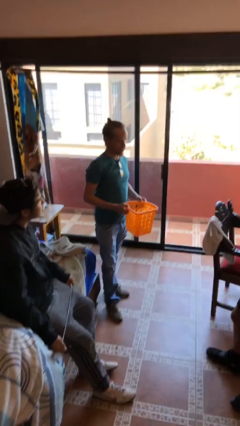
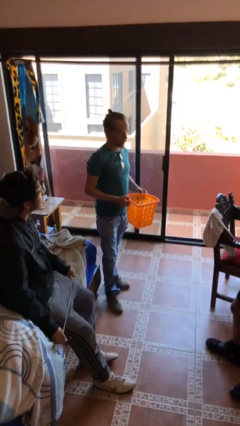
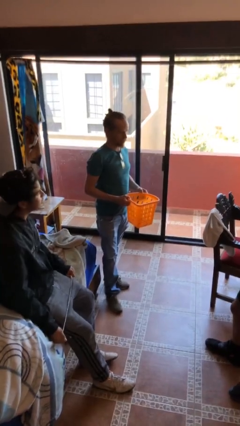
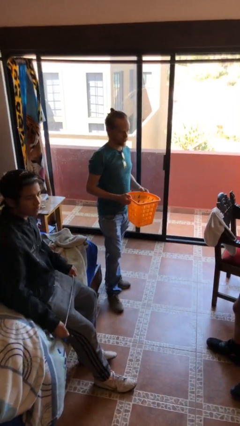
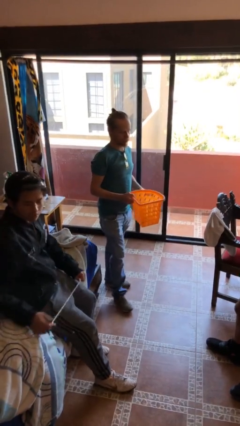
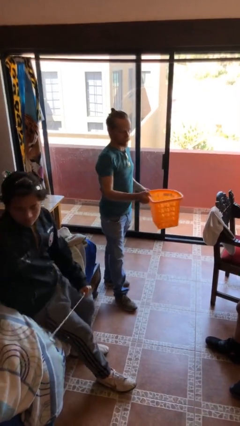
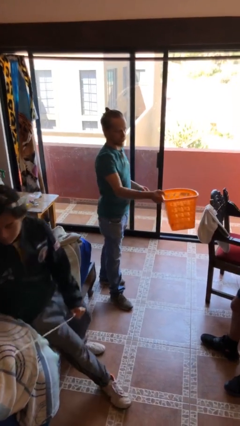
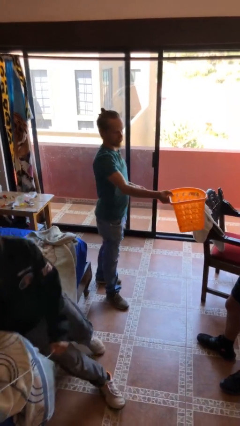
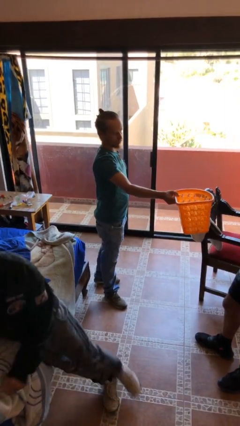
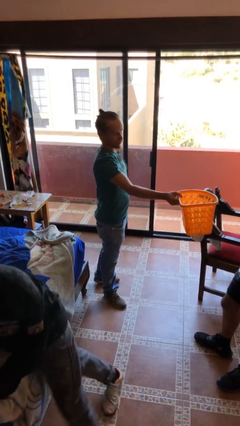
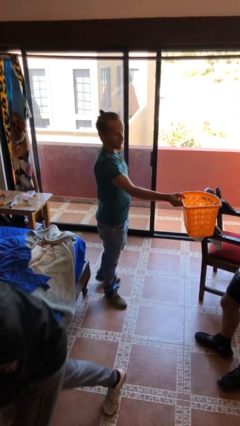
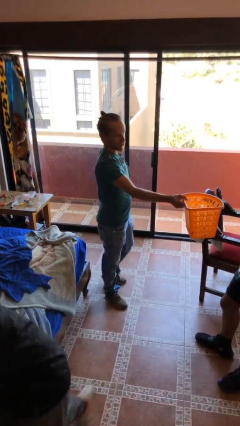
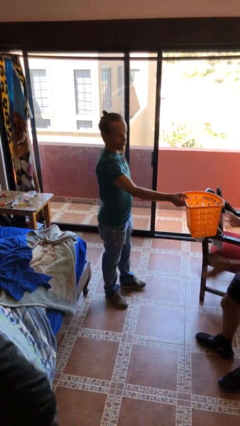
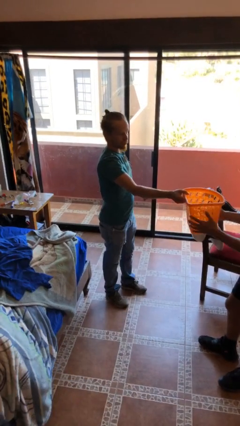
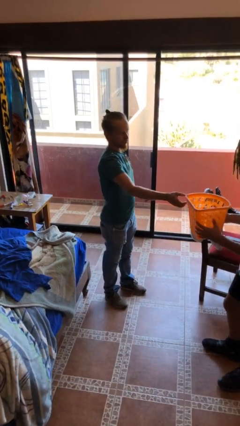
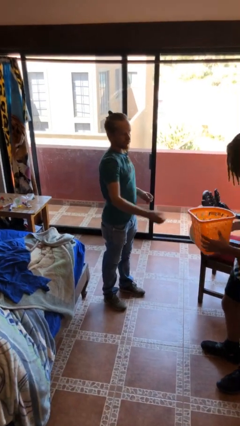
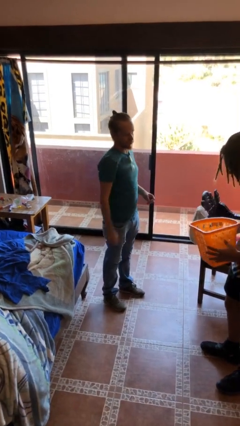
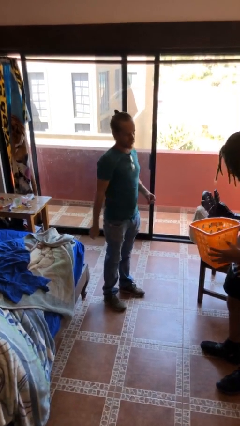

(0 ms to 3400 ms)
person transfers object to person

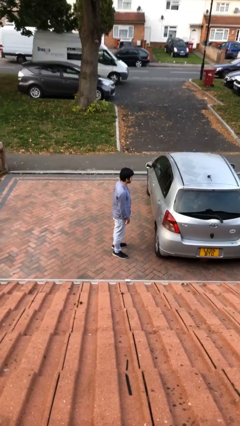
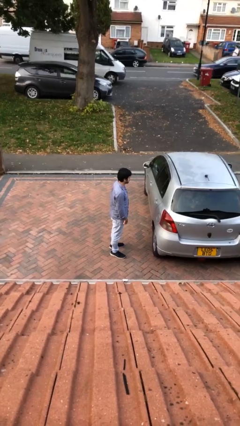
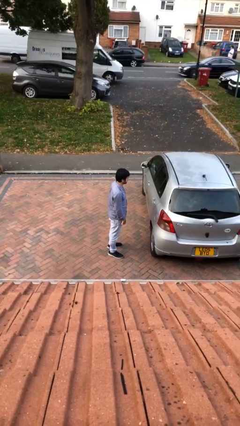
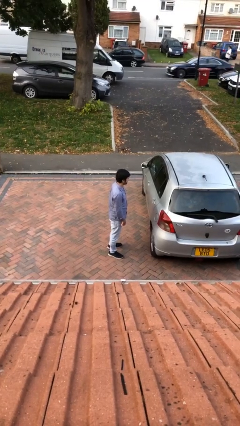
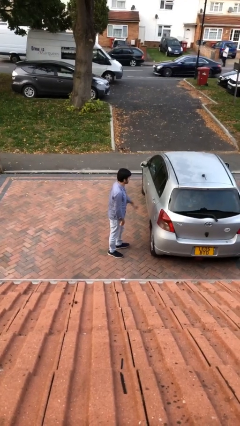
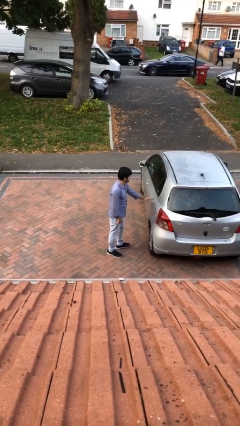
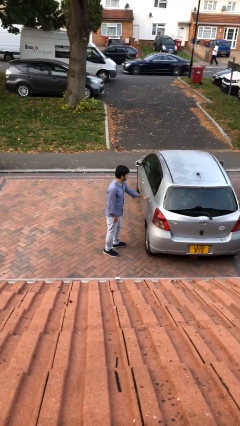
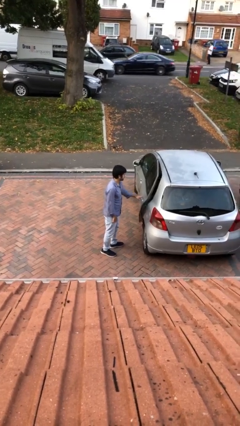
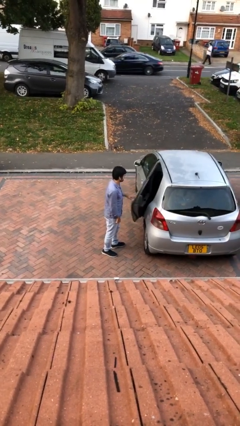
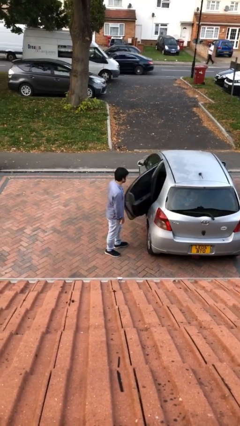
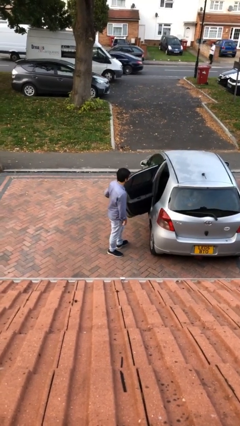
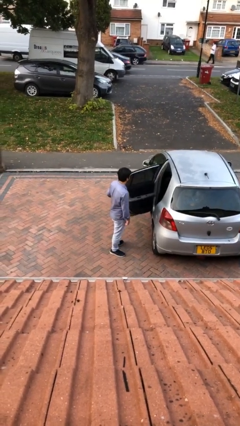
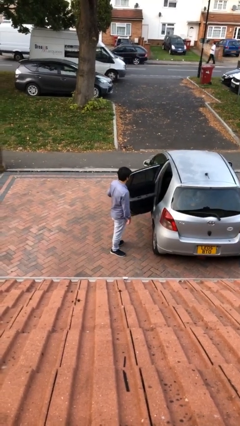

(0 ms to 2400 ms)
person opens car door

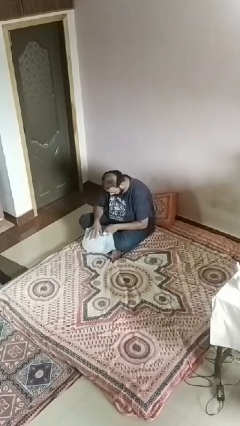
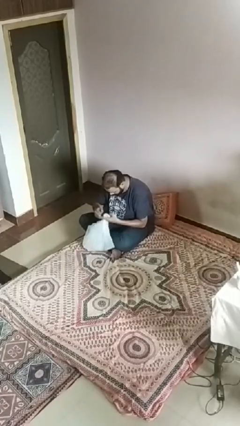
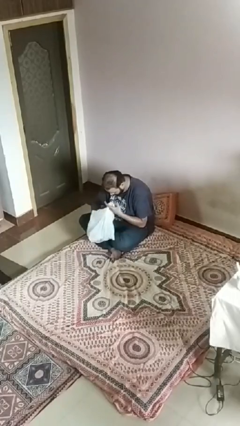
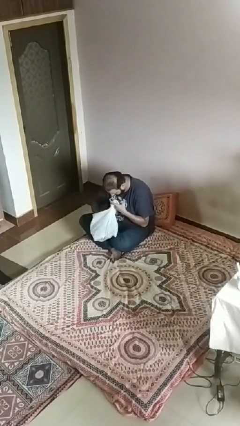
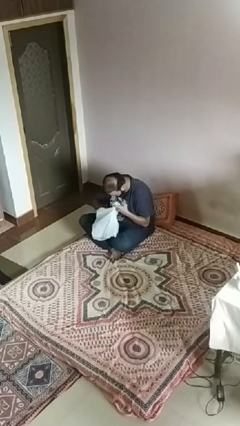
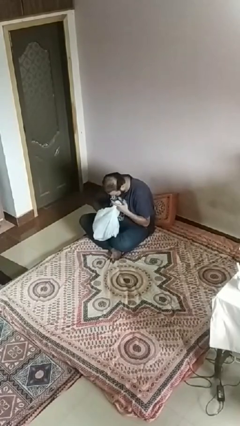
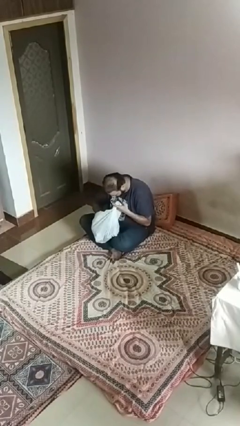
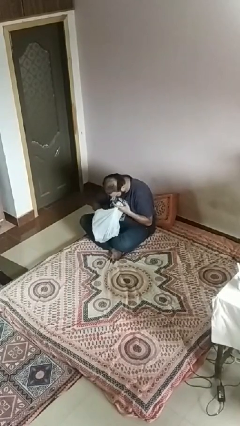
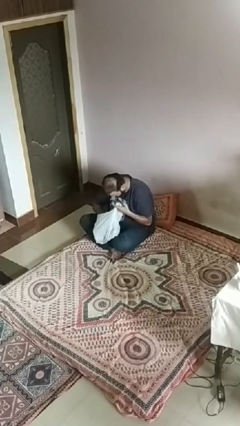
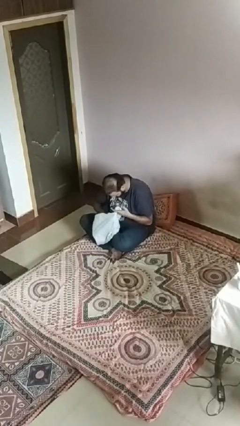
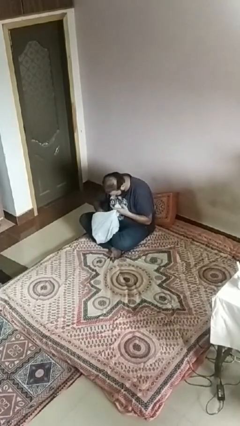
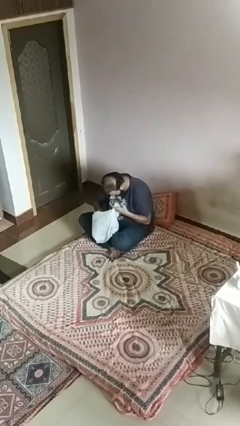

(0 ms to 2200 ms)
person searches in bag

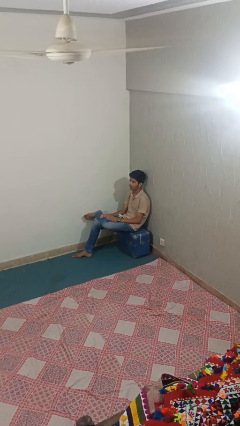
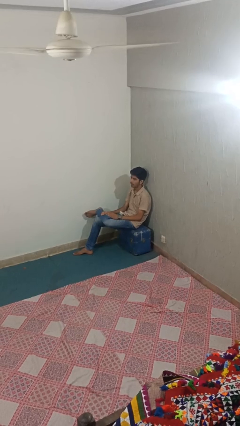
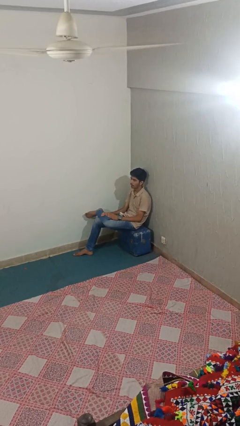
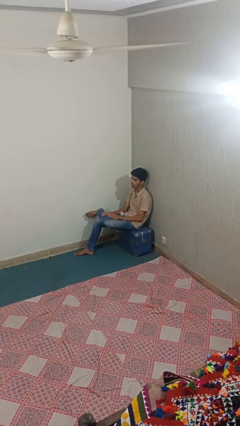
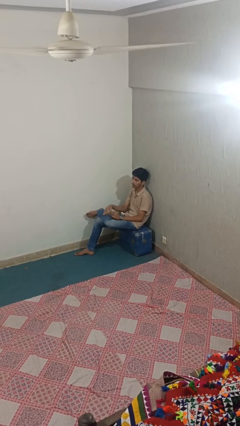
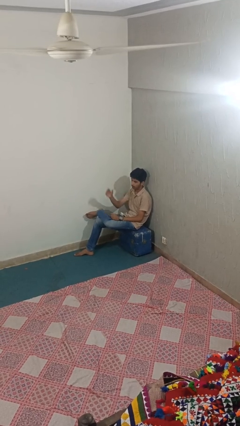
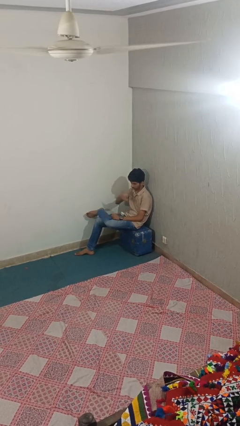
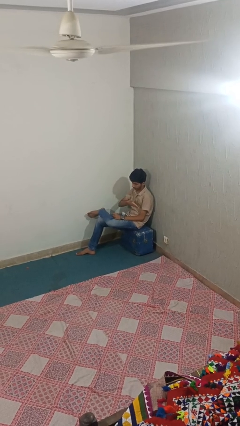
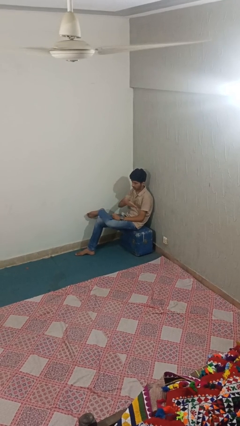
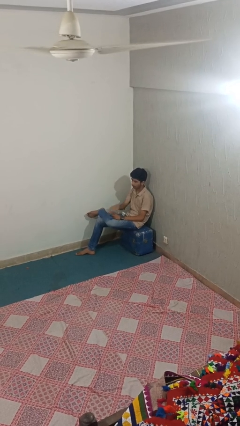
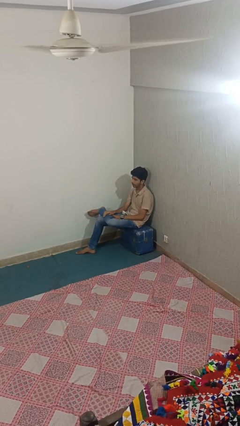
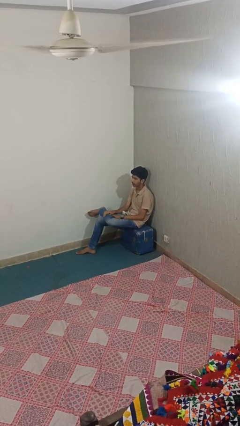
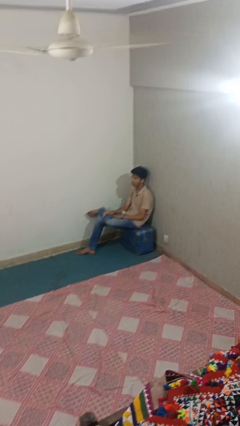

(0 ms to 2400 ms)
person gestures come here

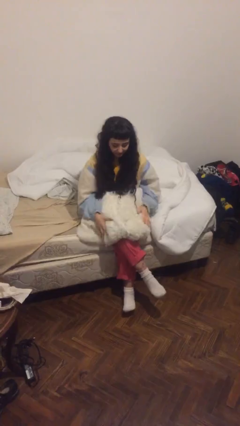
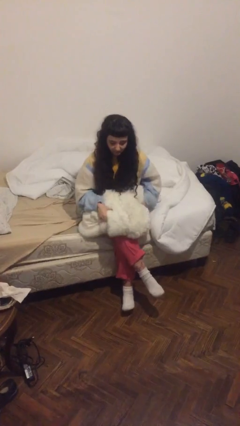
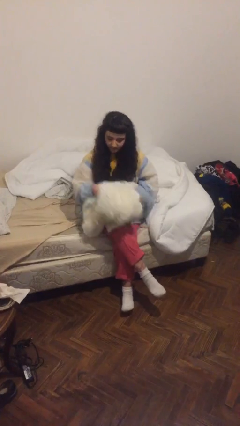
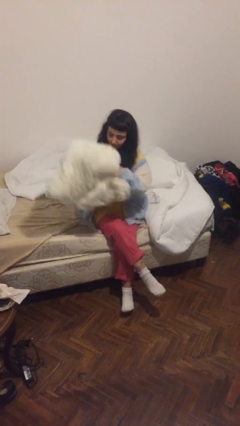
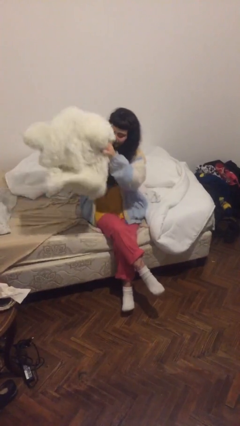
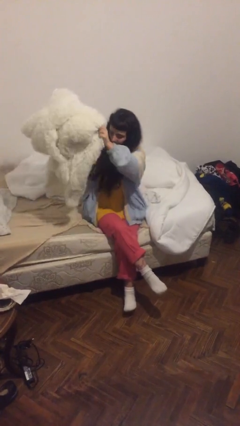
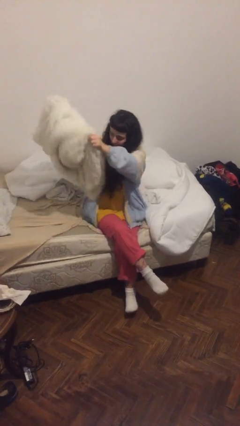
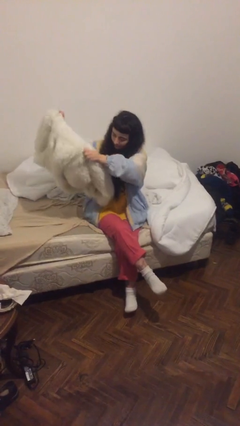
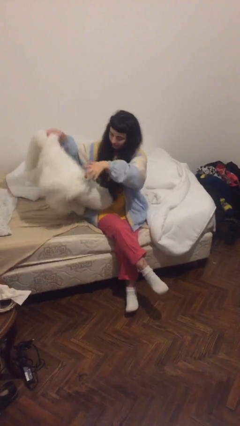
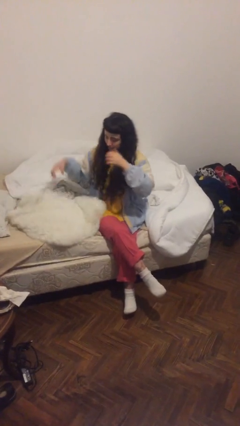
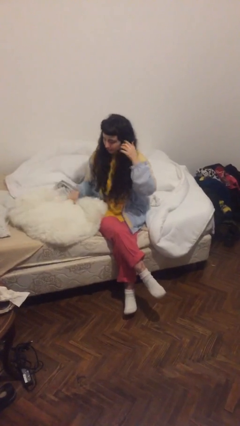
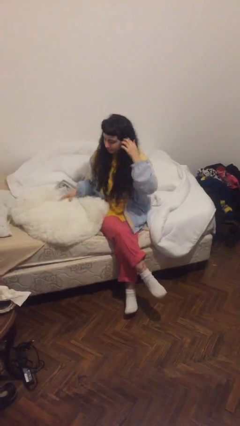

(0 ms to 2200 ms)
person unfolds blanket

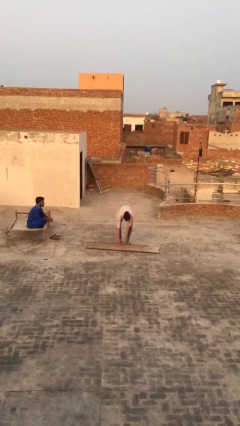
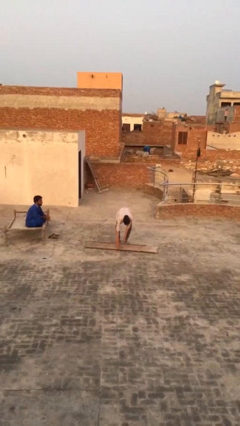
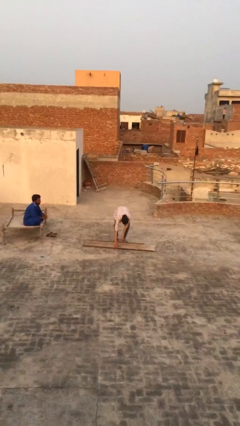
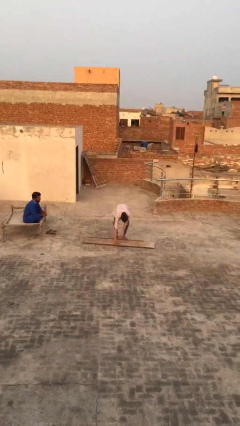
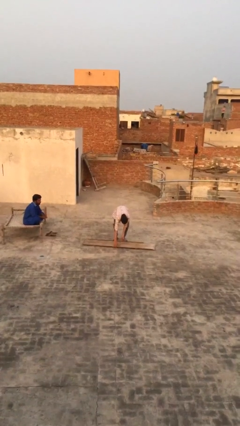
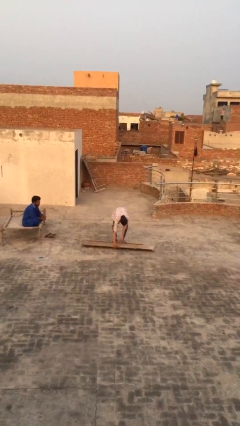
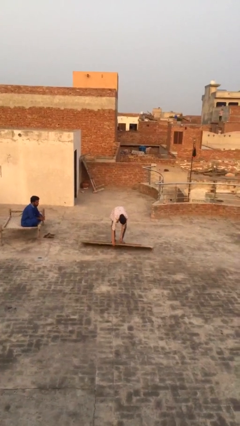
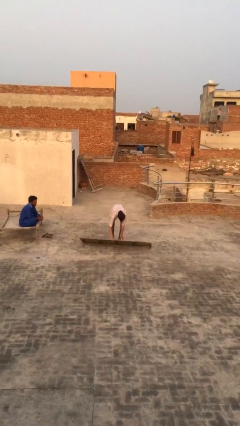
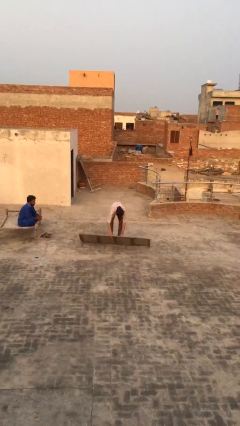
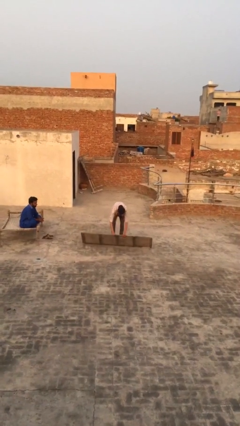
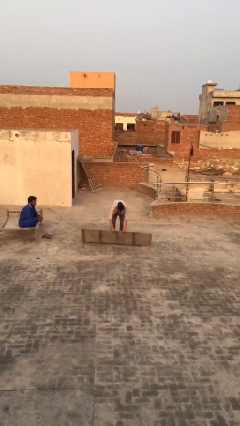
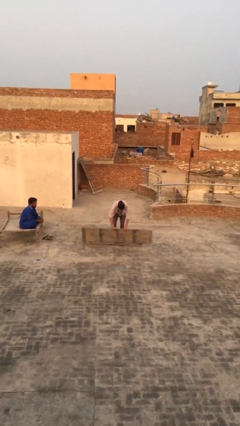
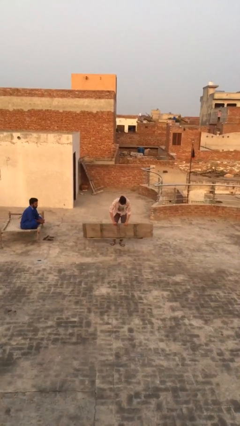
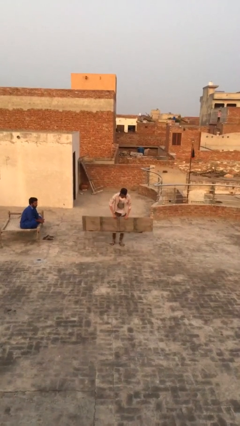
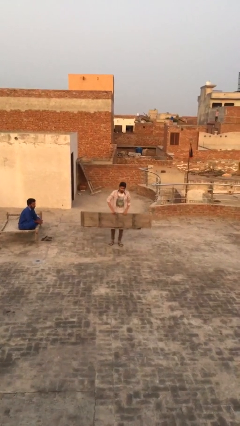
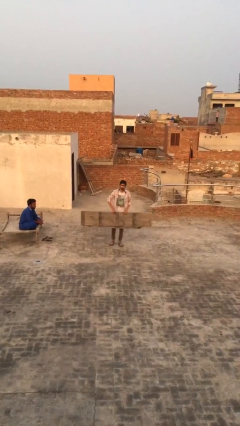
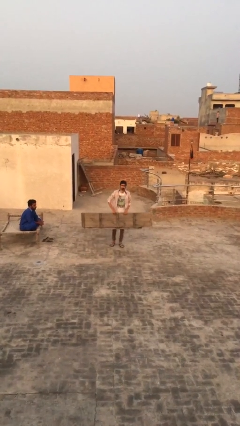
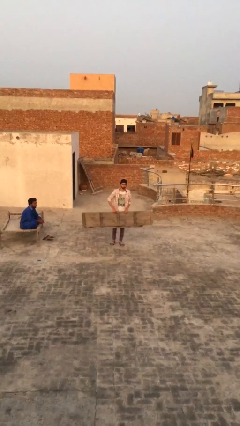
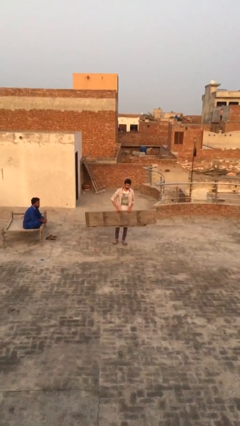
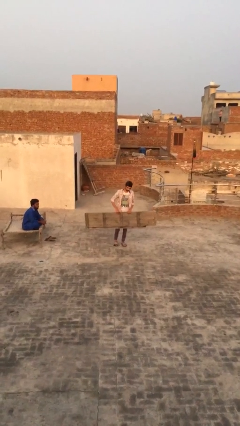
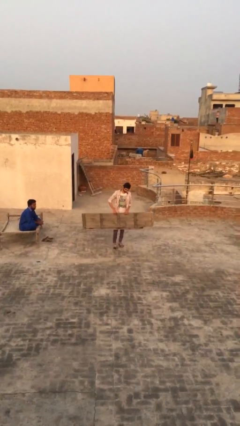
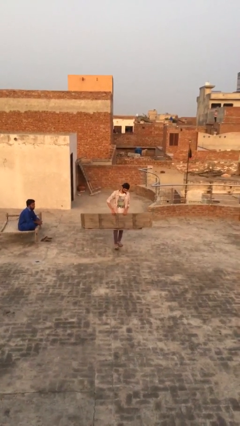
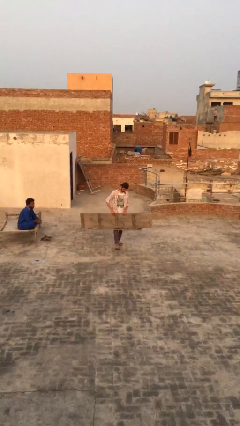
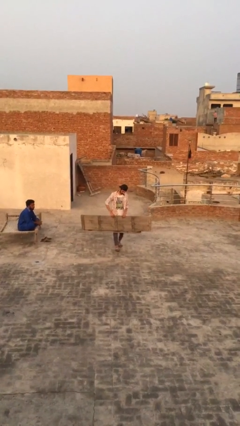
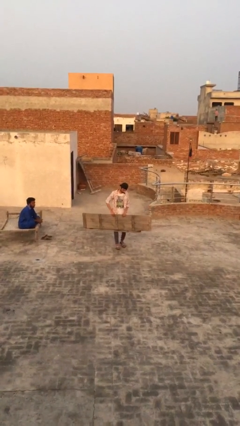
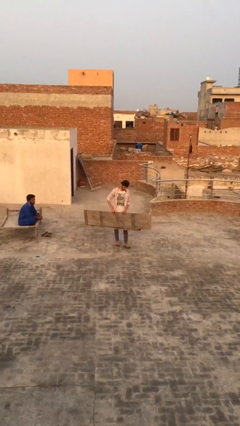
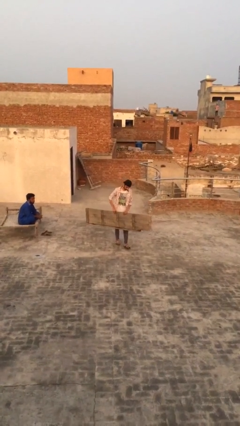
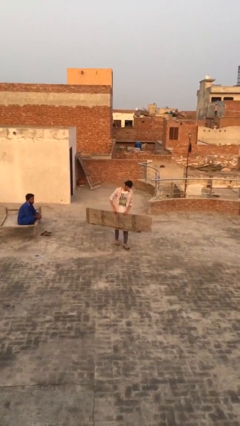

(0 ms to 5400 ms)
person carries heavy object
